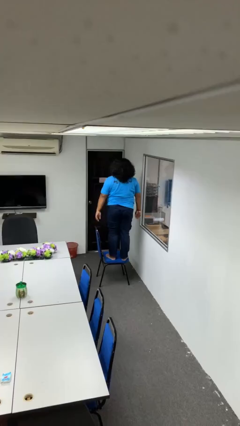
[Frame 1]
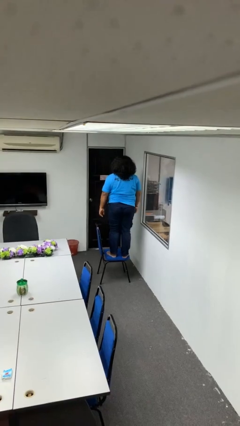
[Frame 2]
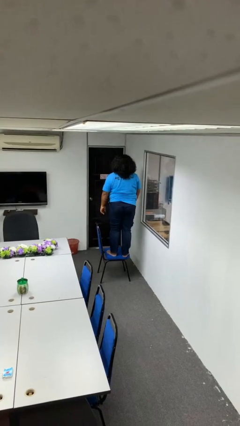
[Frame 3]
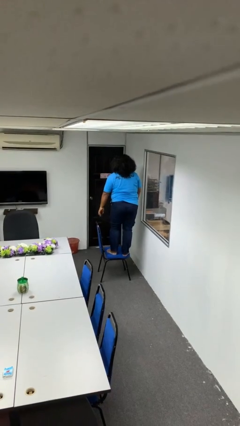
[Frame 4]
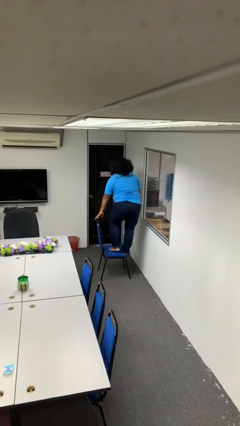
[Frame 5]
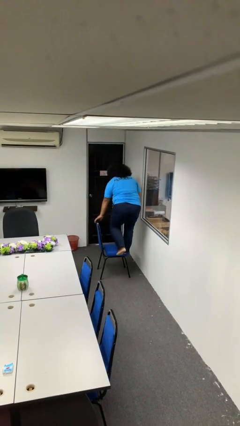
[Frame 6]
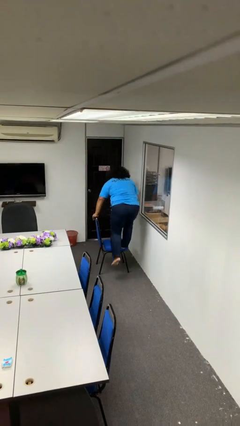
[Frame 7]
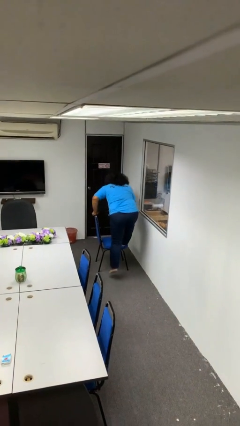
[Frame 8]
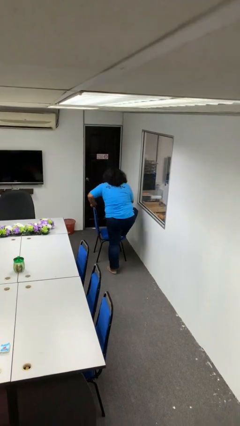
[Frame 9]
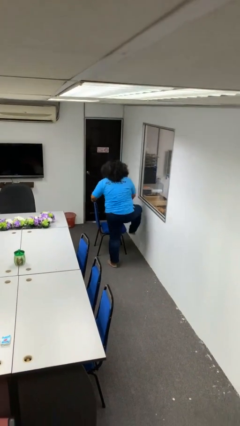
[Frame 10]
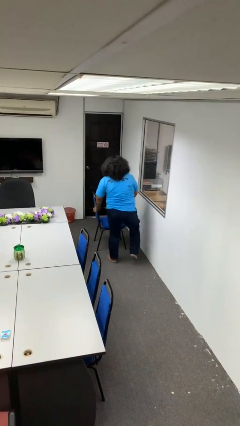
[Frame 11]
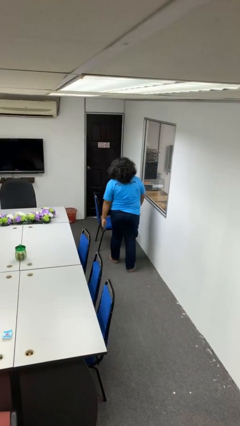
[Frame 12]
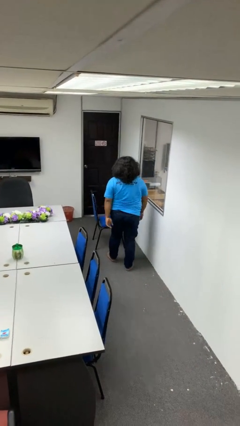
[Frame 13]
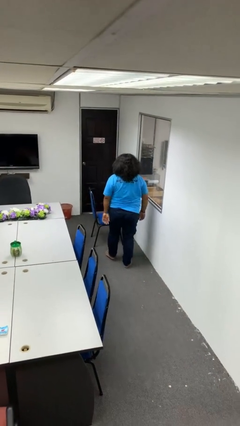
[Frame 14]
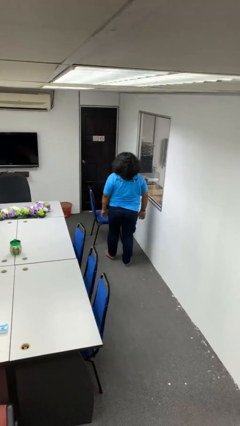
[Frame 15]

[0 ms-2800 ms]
person climbs off chair

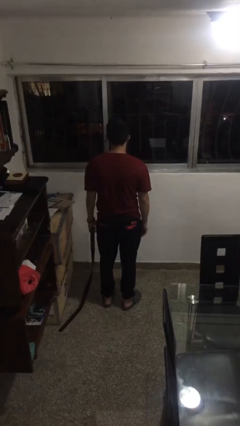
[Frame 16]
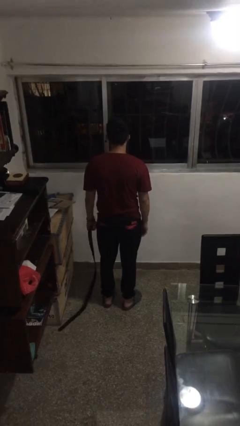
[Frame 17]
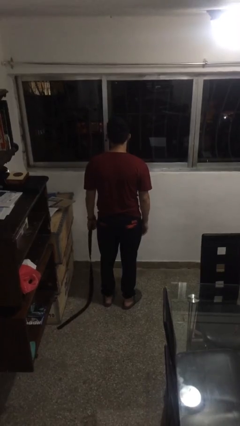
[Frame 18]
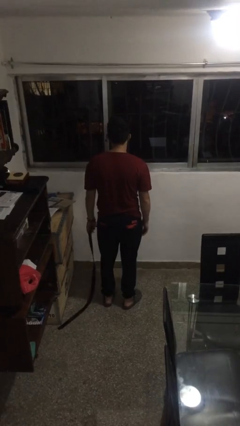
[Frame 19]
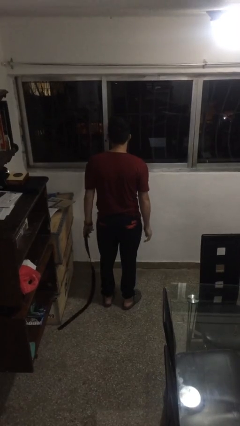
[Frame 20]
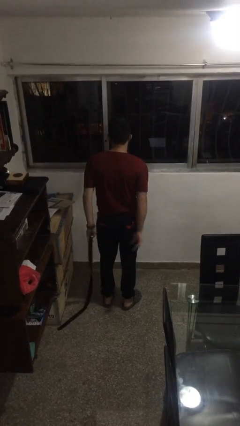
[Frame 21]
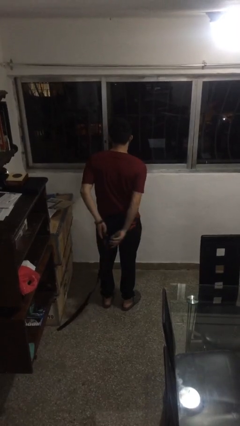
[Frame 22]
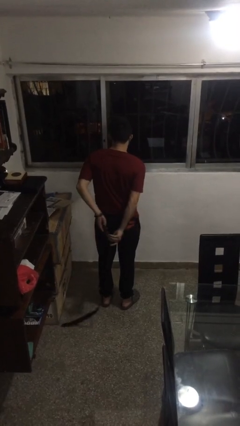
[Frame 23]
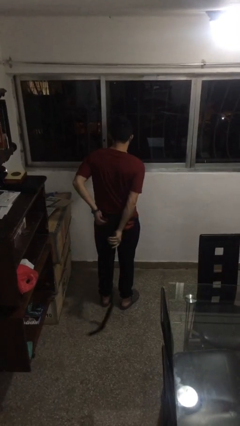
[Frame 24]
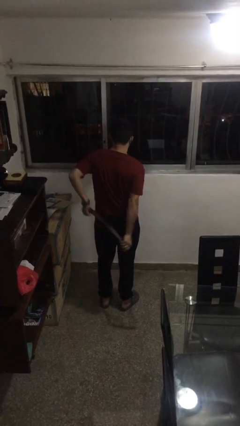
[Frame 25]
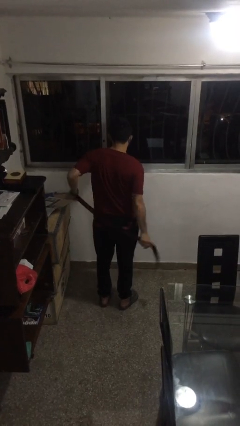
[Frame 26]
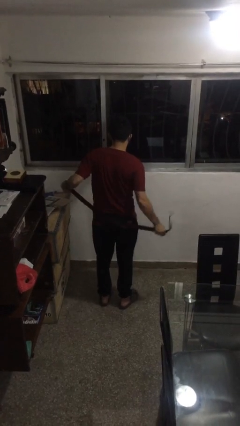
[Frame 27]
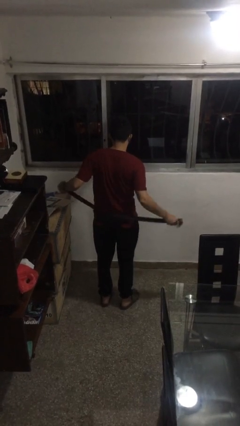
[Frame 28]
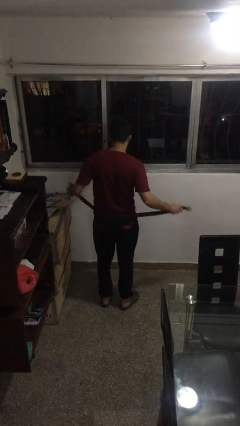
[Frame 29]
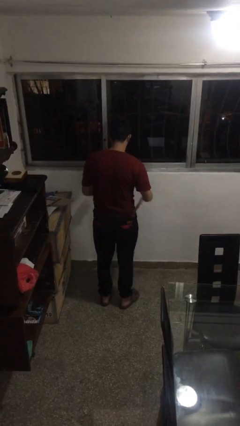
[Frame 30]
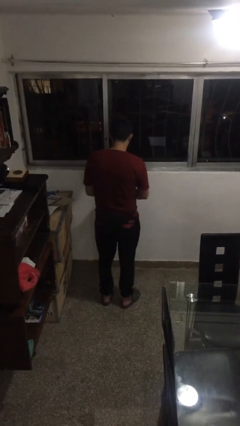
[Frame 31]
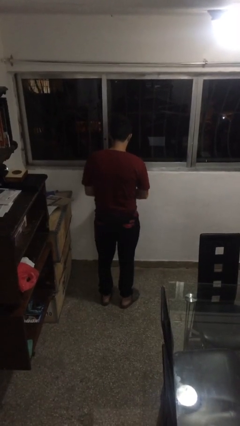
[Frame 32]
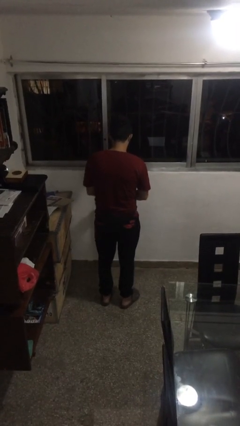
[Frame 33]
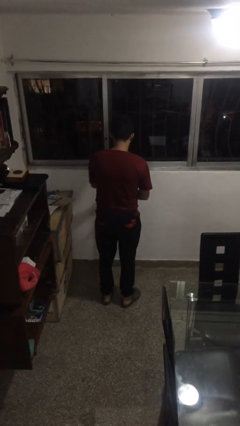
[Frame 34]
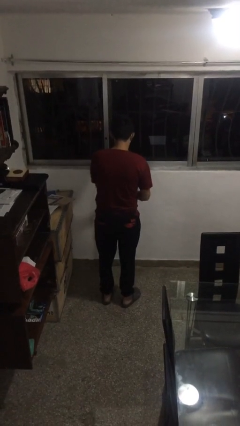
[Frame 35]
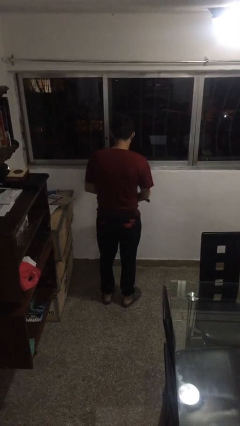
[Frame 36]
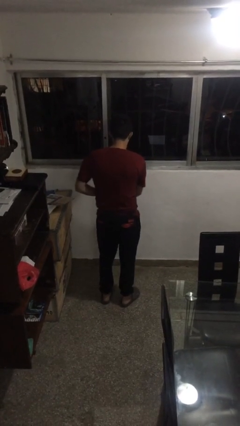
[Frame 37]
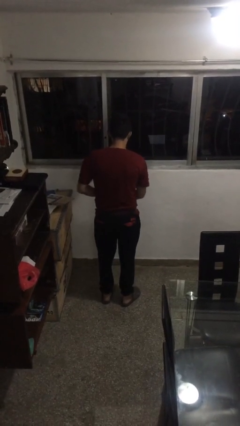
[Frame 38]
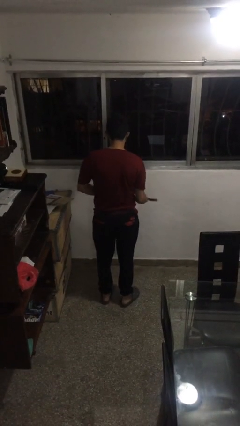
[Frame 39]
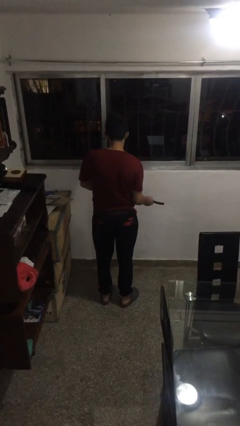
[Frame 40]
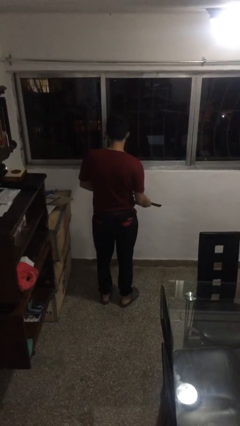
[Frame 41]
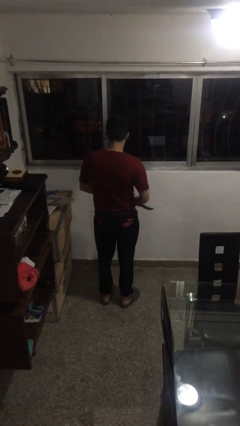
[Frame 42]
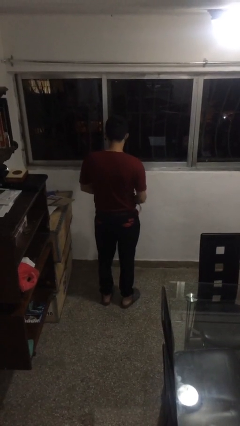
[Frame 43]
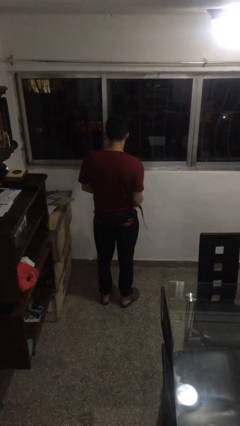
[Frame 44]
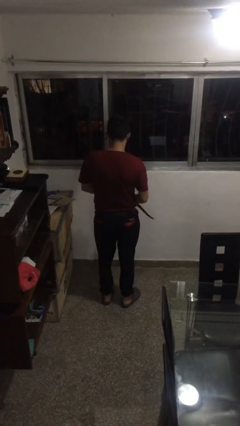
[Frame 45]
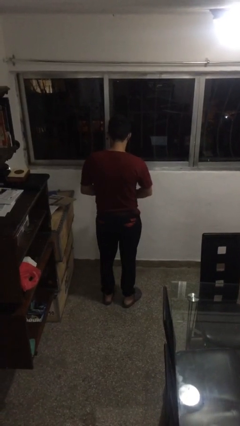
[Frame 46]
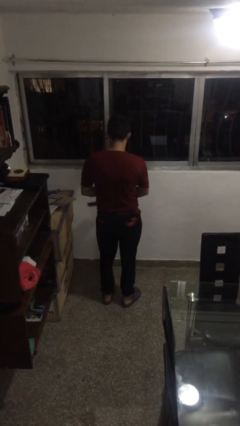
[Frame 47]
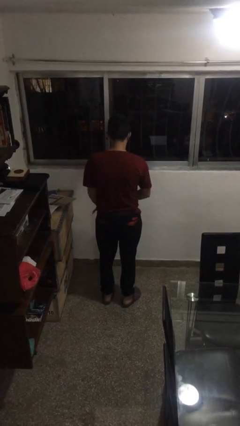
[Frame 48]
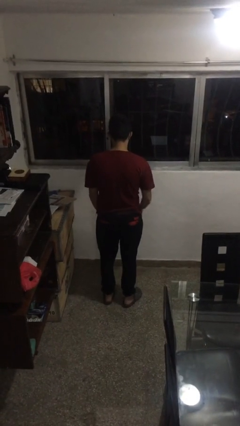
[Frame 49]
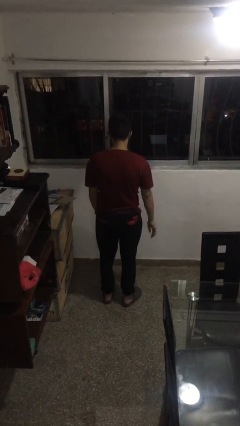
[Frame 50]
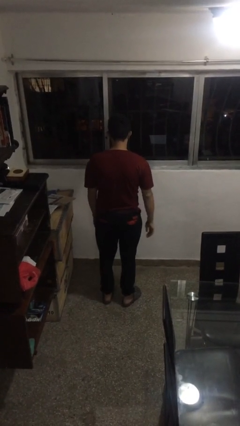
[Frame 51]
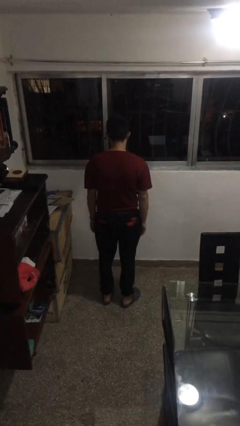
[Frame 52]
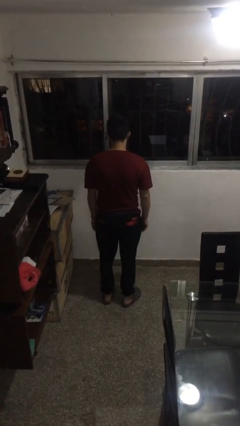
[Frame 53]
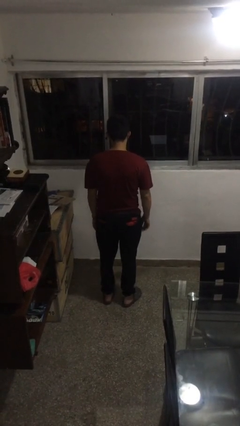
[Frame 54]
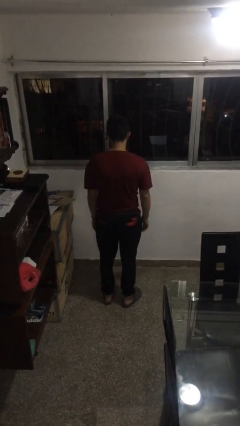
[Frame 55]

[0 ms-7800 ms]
person puts on belt

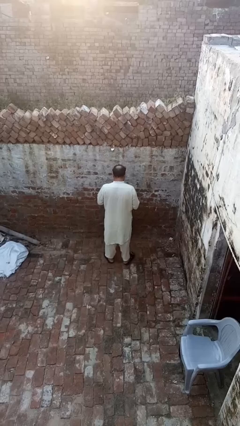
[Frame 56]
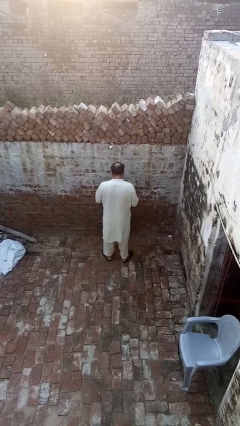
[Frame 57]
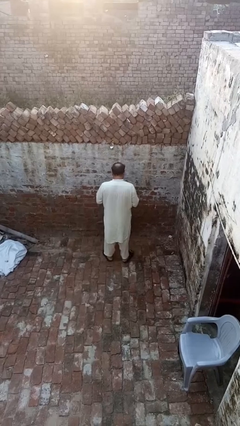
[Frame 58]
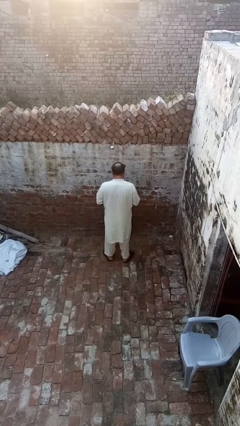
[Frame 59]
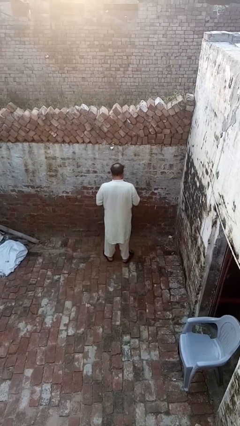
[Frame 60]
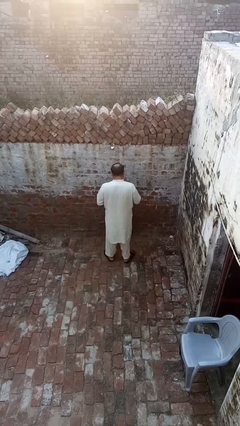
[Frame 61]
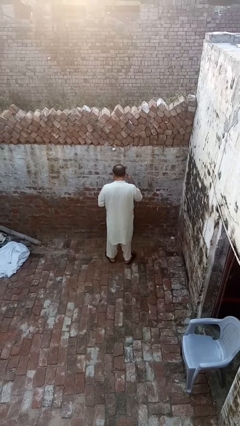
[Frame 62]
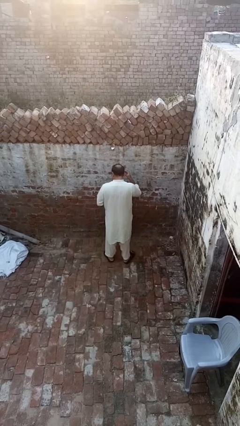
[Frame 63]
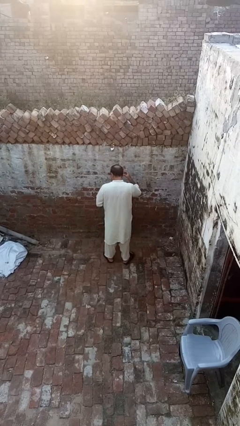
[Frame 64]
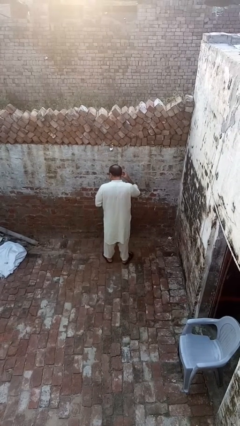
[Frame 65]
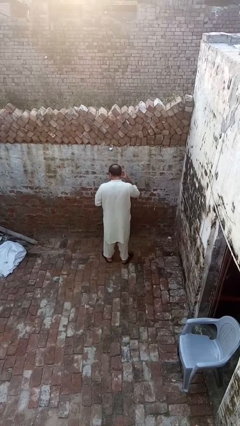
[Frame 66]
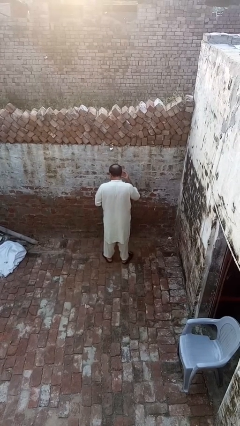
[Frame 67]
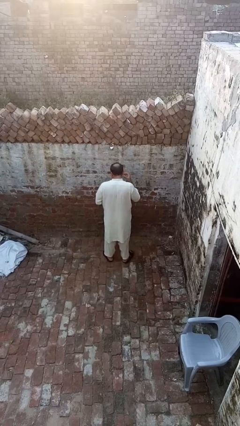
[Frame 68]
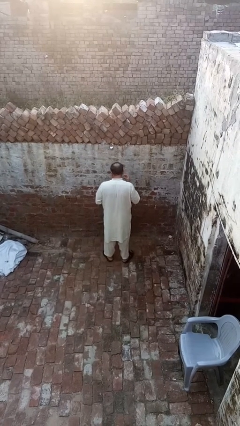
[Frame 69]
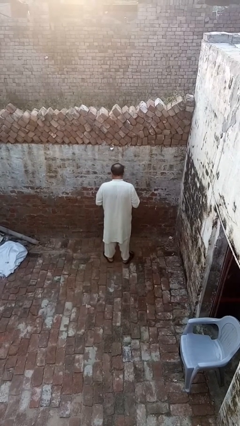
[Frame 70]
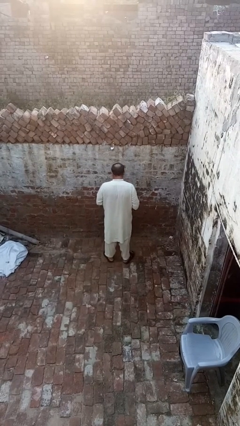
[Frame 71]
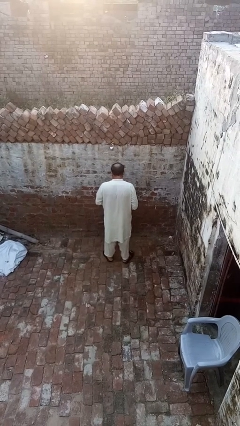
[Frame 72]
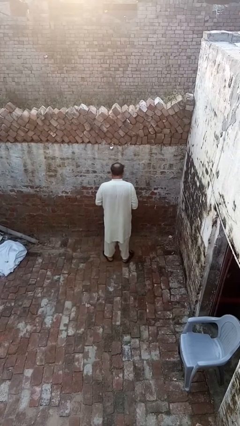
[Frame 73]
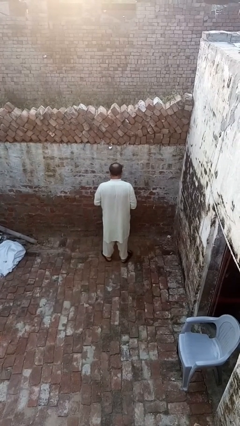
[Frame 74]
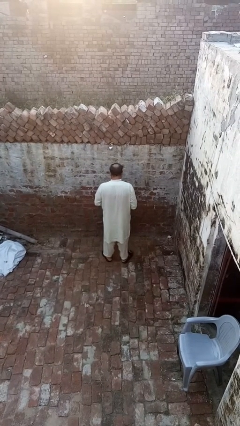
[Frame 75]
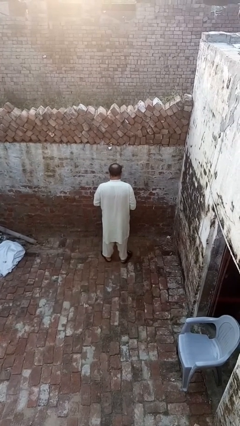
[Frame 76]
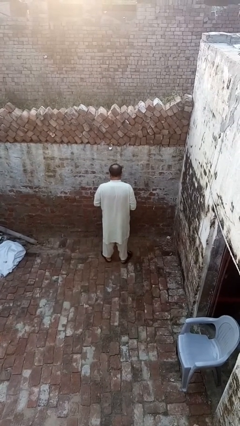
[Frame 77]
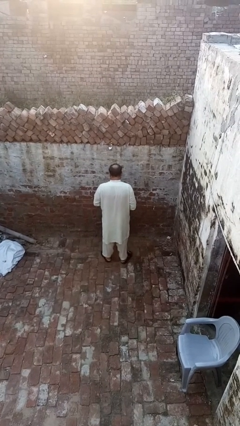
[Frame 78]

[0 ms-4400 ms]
person puts on earrings

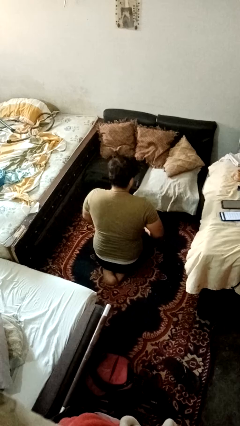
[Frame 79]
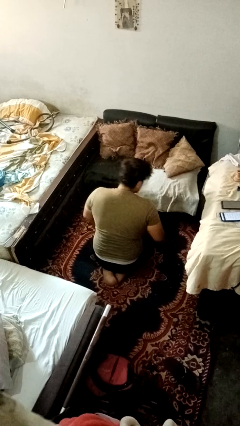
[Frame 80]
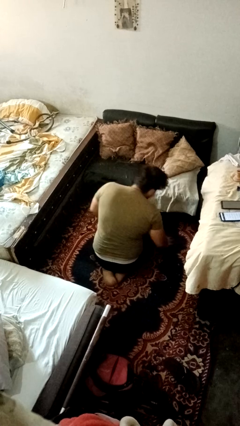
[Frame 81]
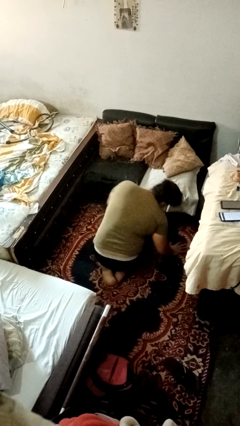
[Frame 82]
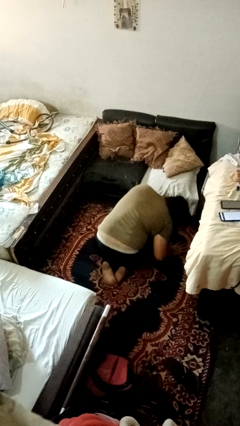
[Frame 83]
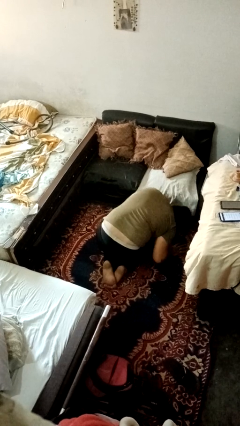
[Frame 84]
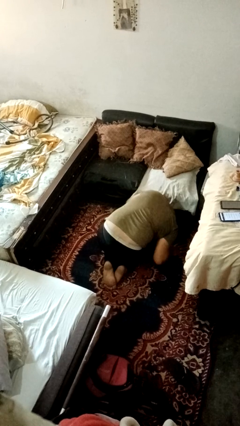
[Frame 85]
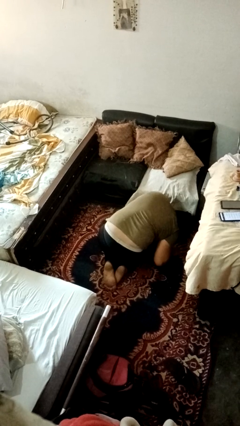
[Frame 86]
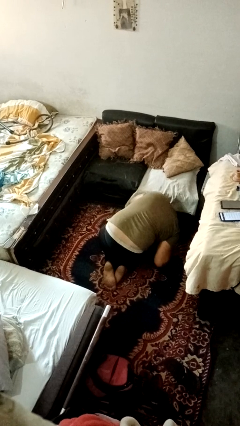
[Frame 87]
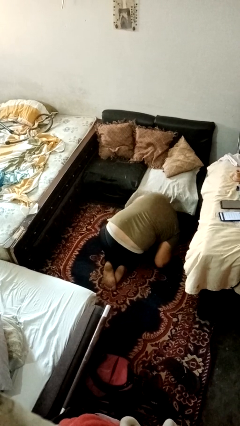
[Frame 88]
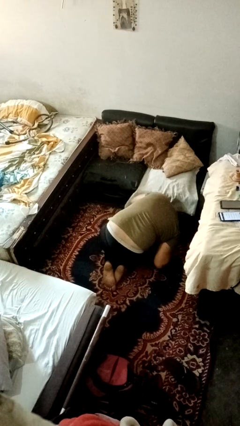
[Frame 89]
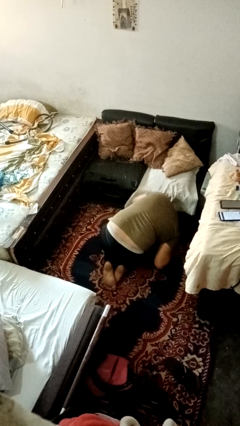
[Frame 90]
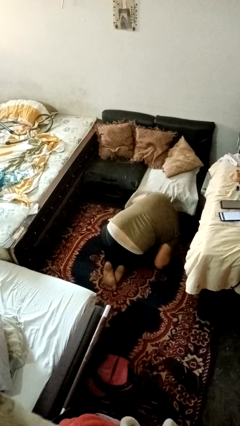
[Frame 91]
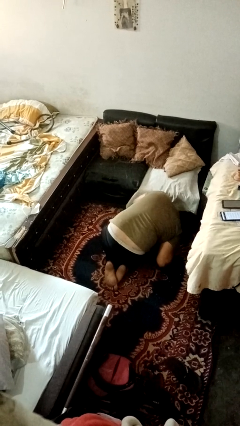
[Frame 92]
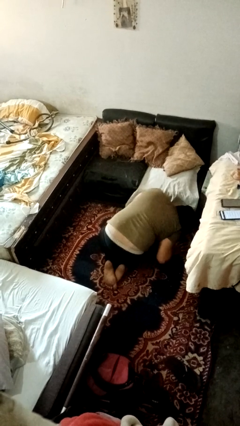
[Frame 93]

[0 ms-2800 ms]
person searches under couch
